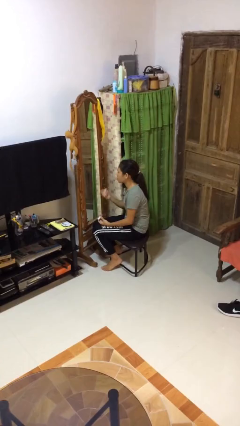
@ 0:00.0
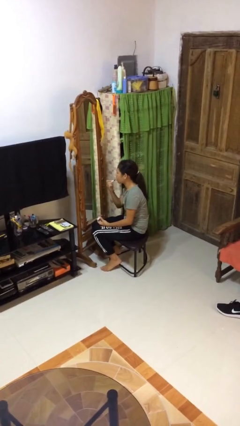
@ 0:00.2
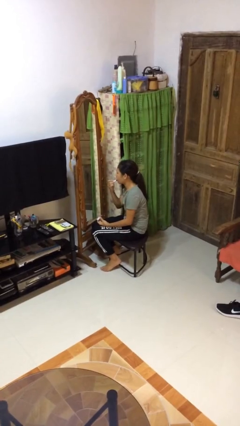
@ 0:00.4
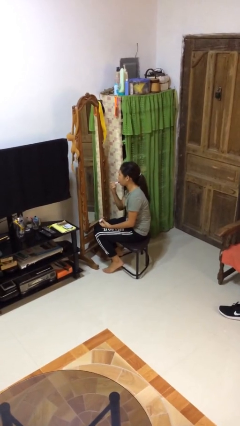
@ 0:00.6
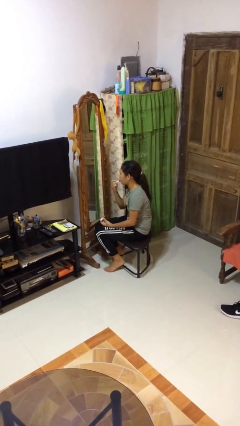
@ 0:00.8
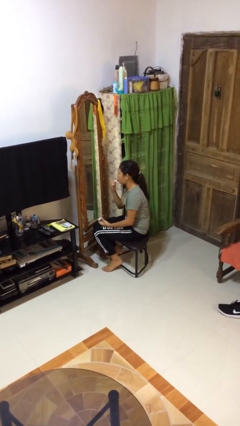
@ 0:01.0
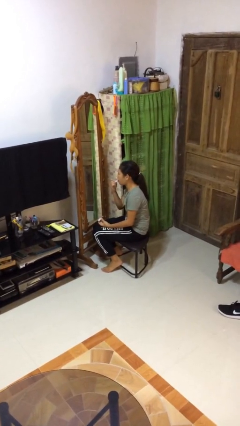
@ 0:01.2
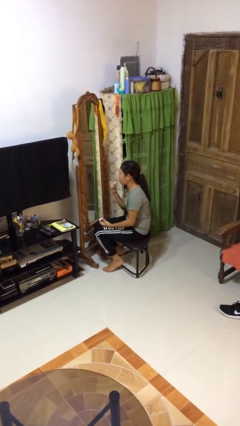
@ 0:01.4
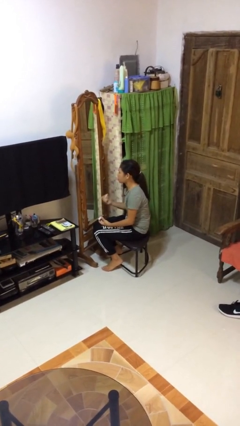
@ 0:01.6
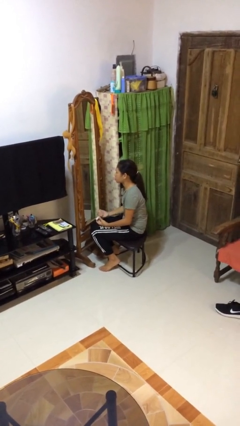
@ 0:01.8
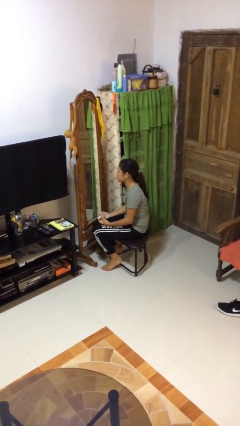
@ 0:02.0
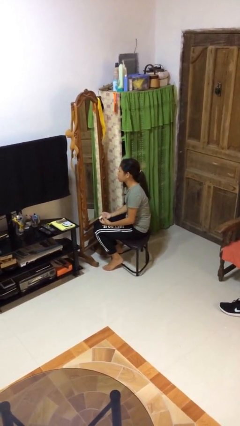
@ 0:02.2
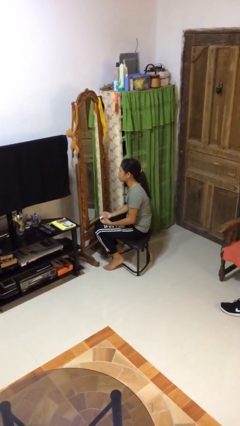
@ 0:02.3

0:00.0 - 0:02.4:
person applies lip makeup

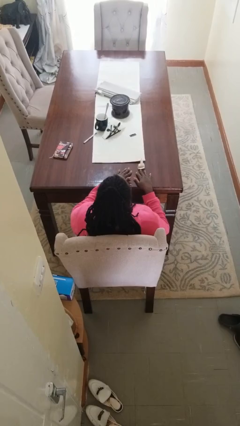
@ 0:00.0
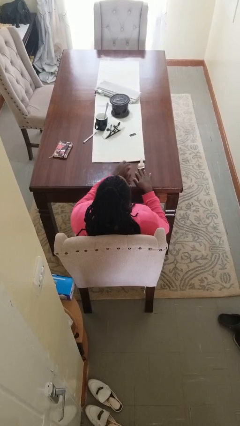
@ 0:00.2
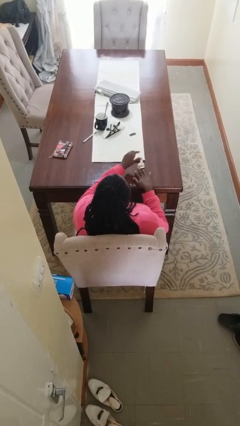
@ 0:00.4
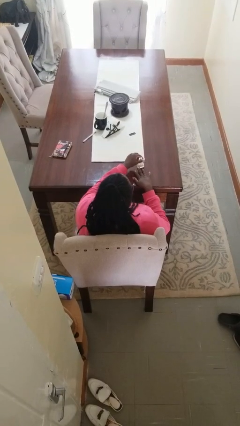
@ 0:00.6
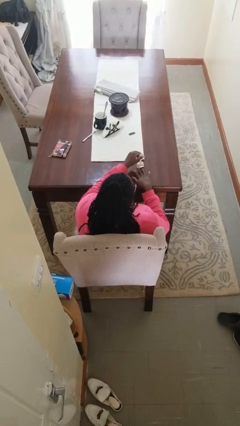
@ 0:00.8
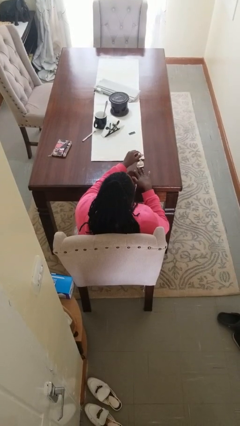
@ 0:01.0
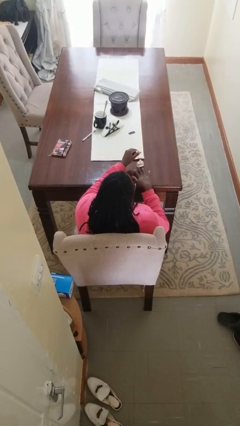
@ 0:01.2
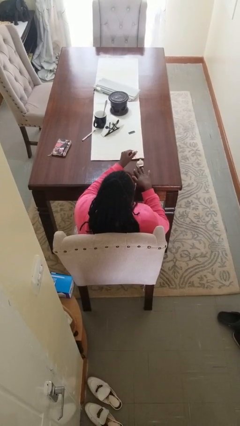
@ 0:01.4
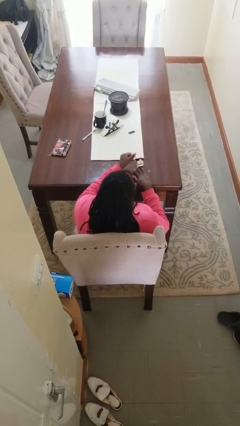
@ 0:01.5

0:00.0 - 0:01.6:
person paints fingernails

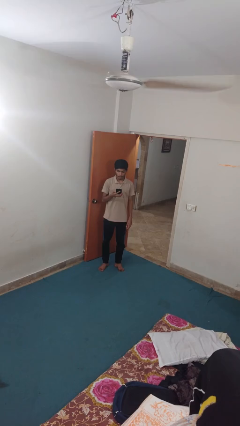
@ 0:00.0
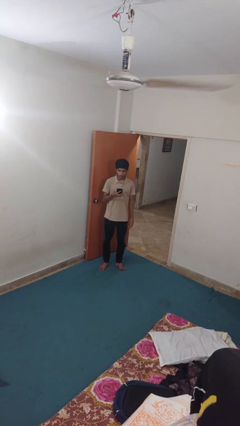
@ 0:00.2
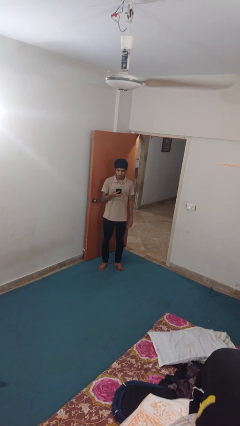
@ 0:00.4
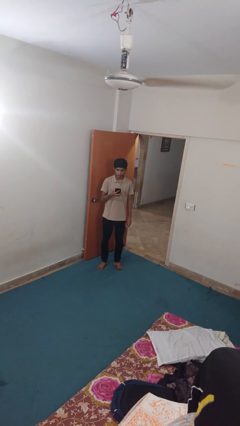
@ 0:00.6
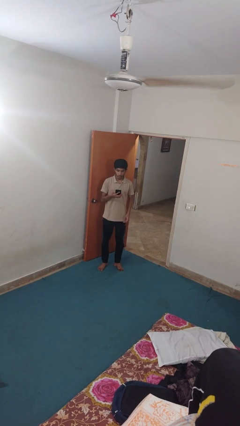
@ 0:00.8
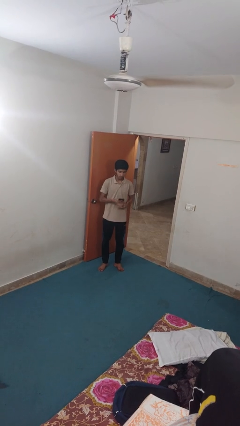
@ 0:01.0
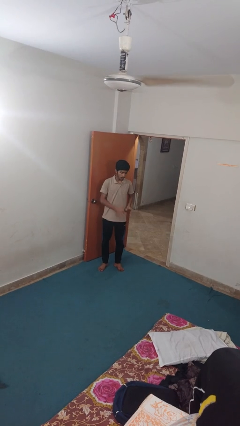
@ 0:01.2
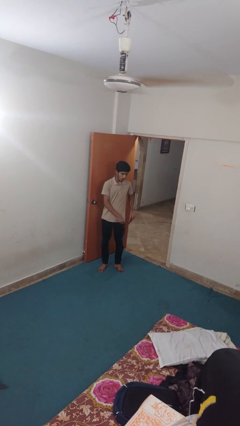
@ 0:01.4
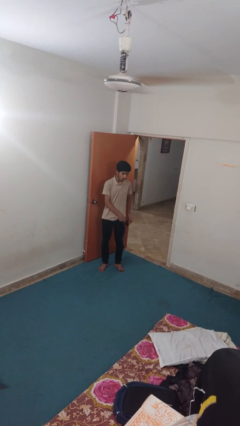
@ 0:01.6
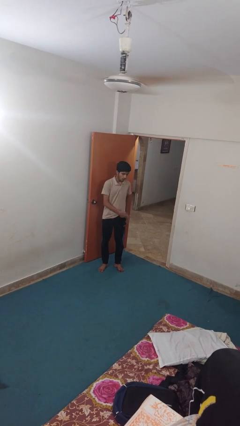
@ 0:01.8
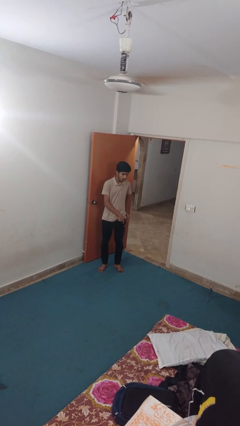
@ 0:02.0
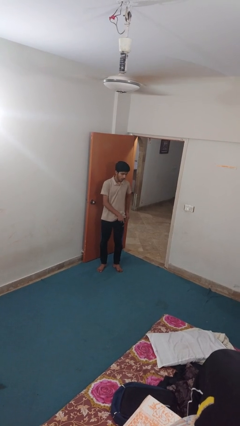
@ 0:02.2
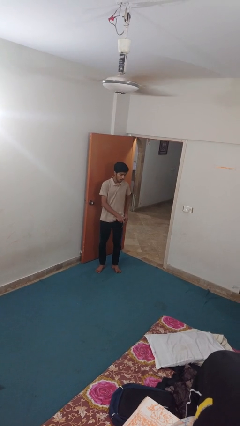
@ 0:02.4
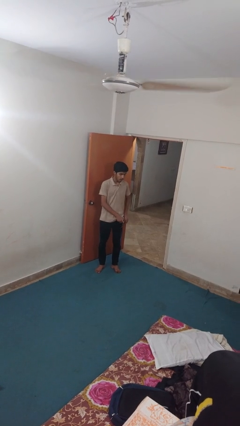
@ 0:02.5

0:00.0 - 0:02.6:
person puts phone into pocket

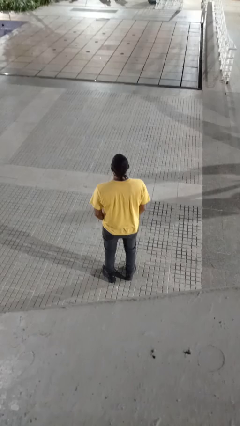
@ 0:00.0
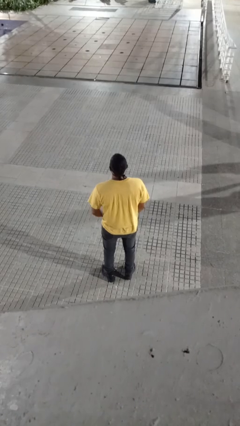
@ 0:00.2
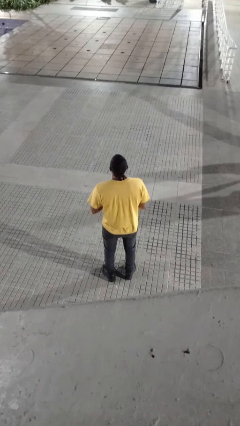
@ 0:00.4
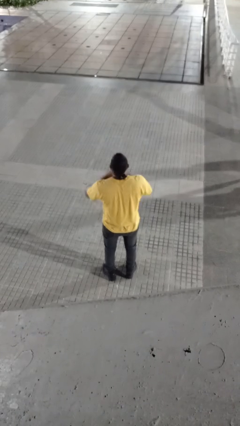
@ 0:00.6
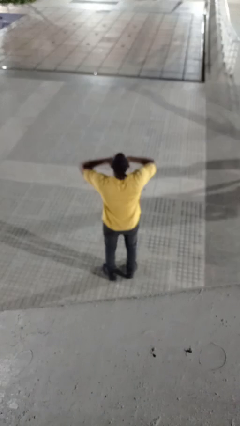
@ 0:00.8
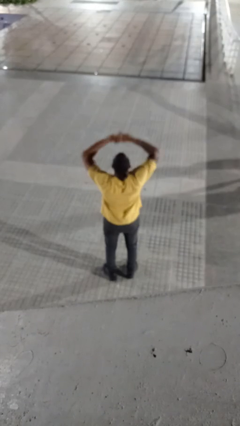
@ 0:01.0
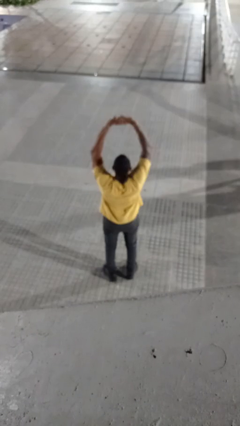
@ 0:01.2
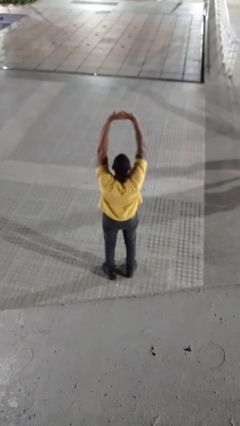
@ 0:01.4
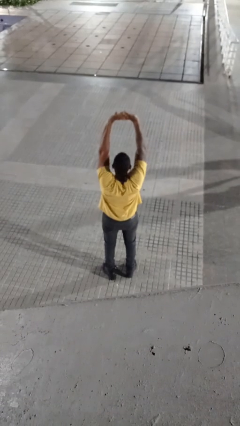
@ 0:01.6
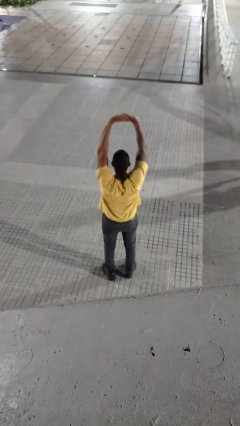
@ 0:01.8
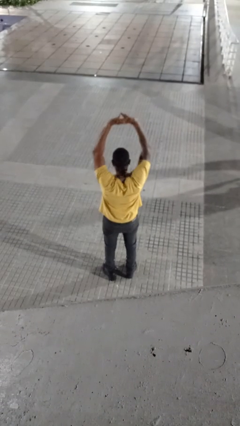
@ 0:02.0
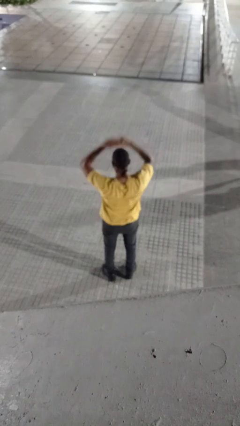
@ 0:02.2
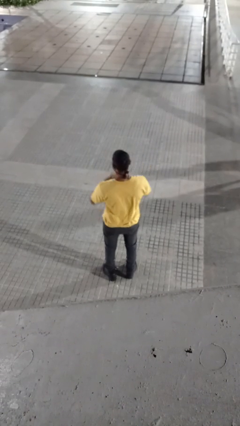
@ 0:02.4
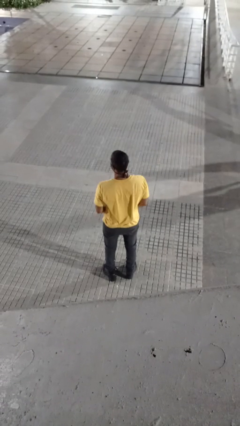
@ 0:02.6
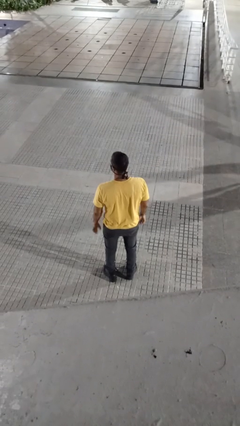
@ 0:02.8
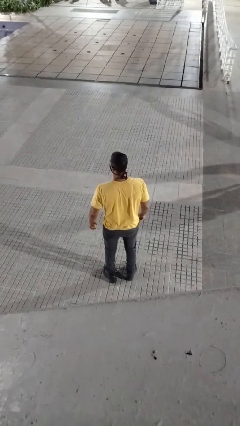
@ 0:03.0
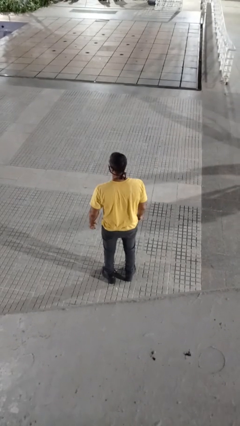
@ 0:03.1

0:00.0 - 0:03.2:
person stretches arms over head

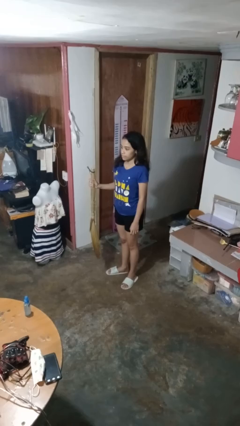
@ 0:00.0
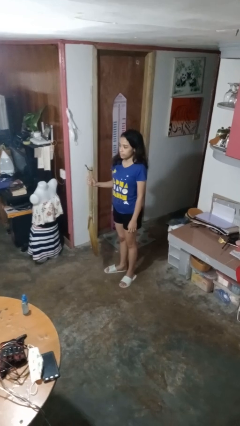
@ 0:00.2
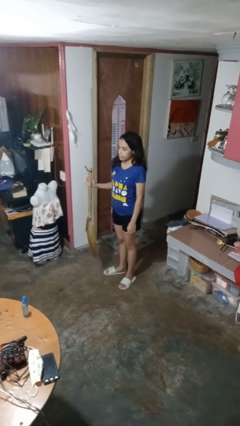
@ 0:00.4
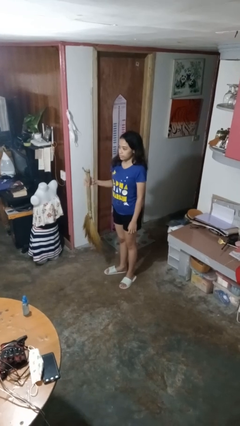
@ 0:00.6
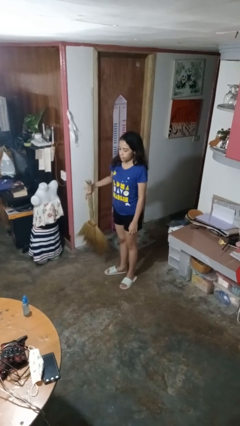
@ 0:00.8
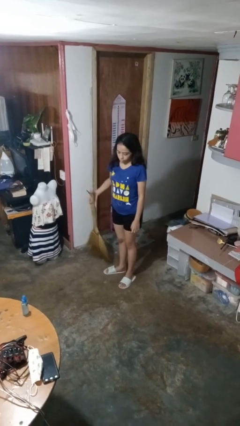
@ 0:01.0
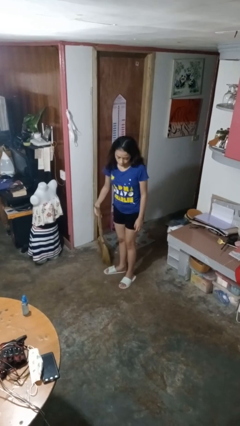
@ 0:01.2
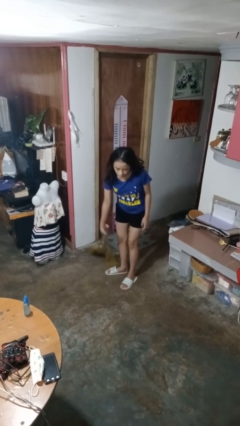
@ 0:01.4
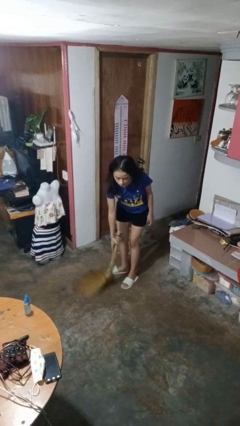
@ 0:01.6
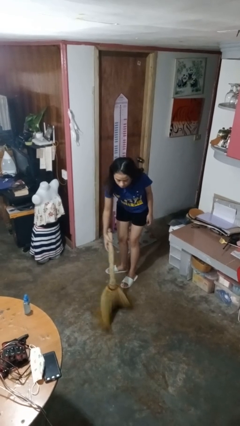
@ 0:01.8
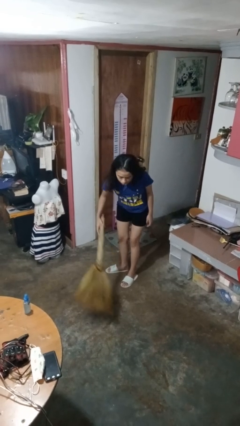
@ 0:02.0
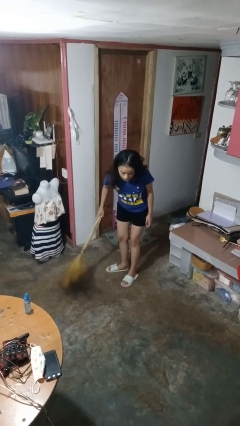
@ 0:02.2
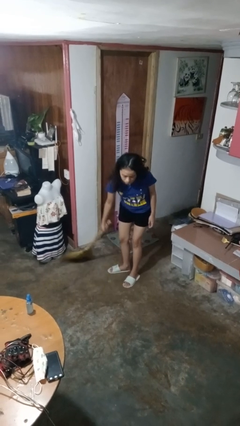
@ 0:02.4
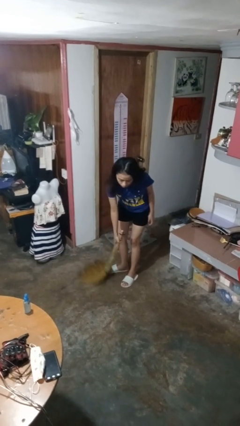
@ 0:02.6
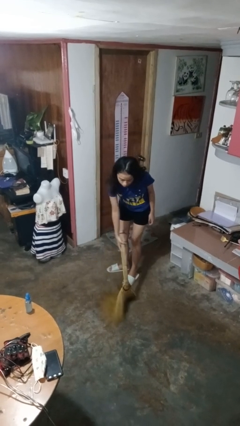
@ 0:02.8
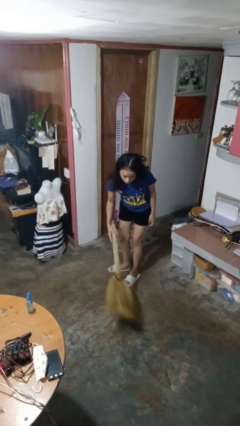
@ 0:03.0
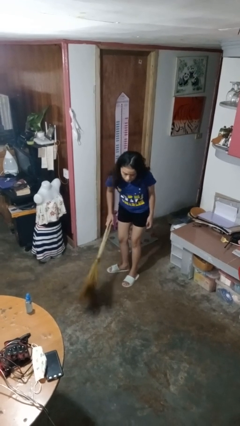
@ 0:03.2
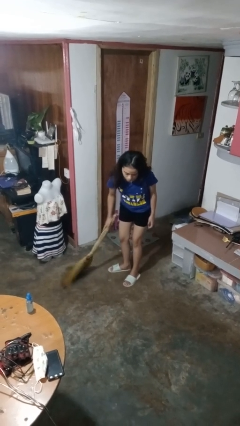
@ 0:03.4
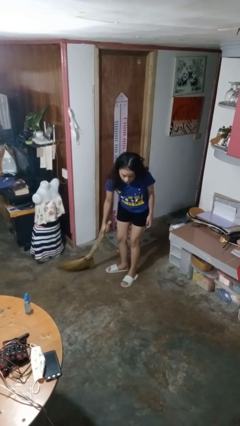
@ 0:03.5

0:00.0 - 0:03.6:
person sweeps floor

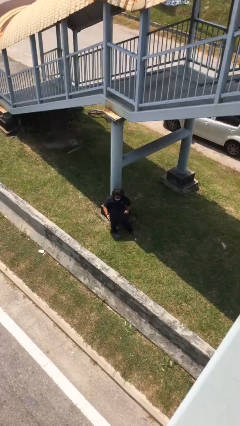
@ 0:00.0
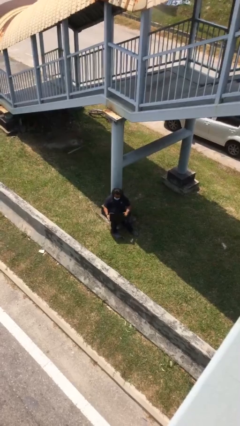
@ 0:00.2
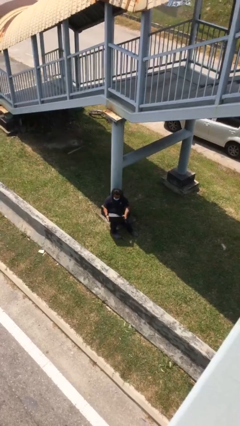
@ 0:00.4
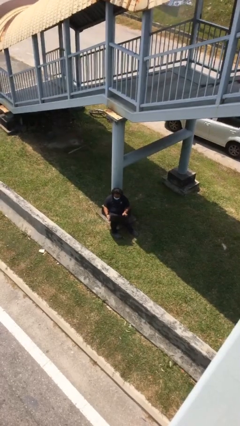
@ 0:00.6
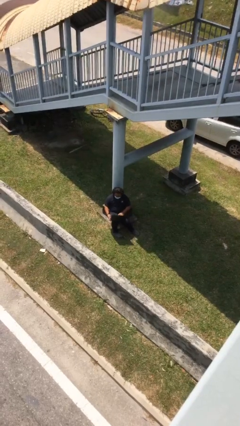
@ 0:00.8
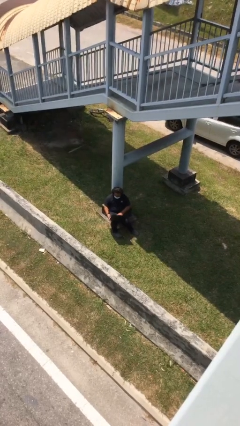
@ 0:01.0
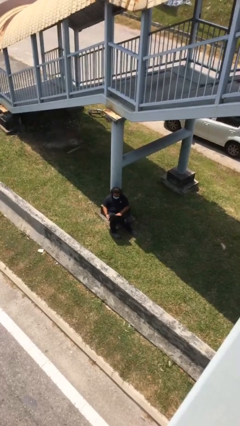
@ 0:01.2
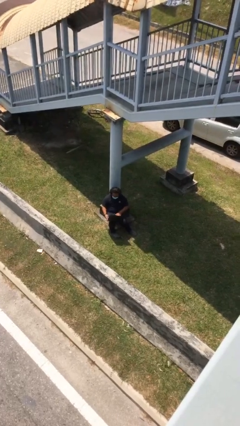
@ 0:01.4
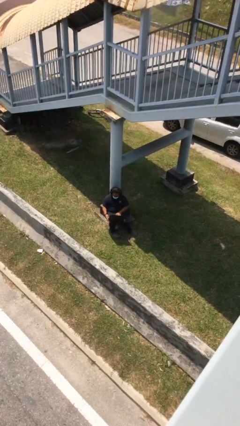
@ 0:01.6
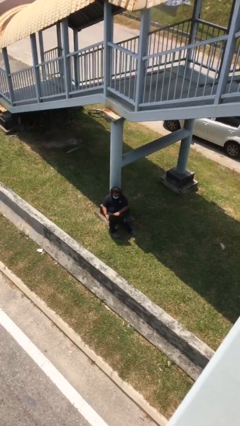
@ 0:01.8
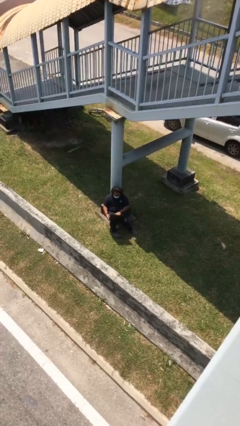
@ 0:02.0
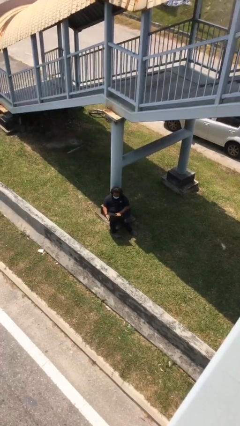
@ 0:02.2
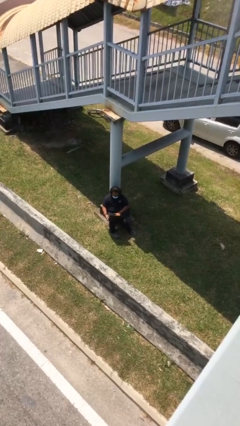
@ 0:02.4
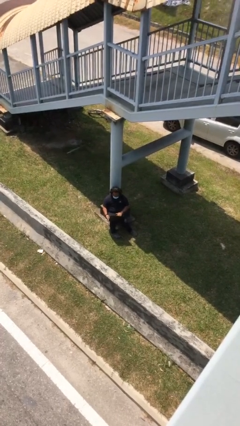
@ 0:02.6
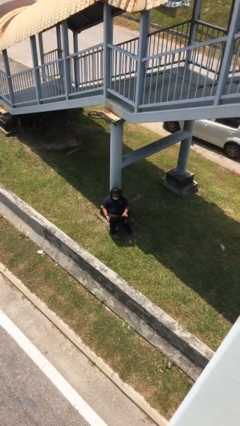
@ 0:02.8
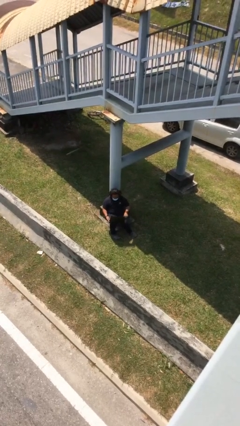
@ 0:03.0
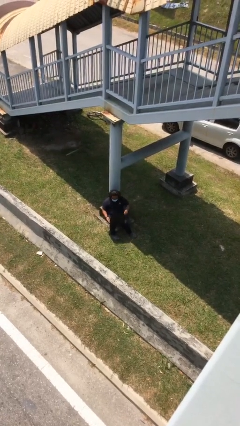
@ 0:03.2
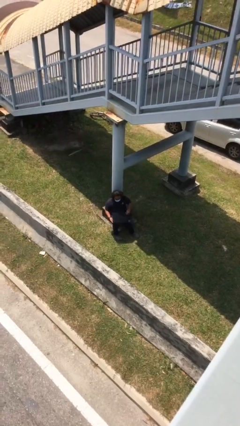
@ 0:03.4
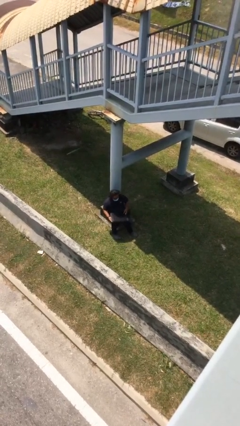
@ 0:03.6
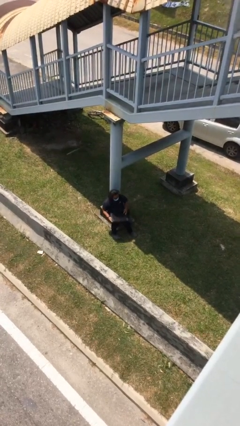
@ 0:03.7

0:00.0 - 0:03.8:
person interacts with laptop

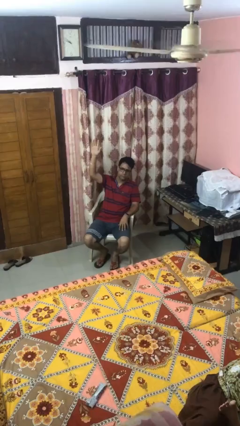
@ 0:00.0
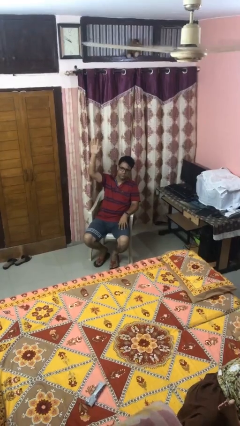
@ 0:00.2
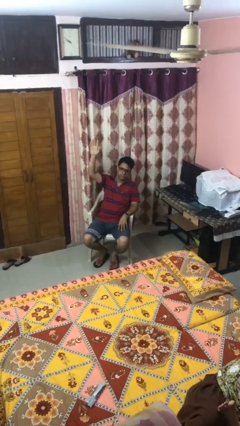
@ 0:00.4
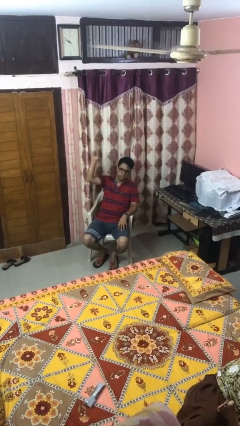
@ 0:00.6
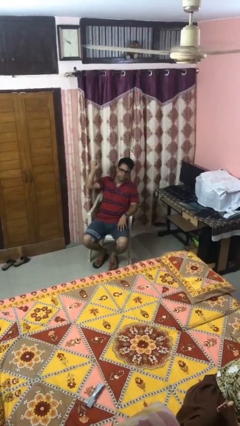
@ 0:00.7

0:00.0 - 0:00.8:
person gestures lower hand
